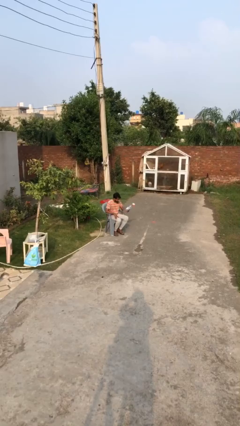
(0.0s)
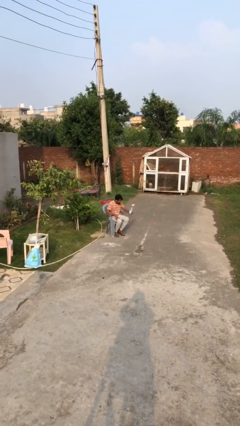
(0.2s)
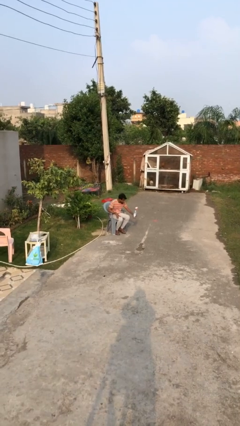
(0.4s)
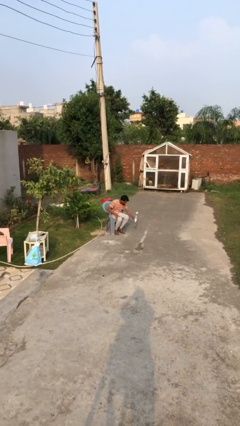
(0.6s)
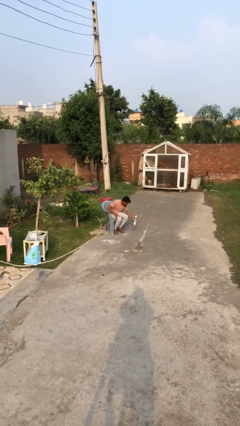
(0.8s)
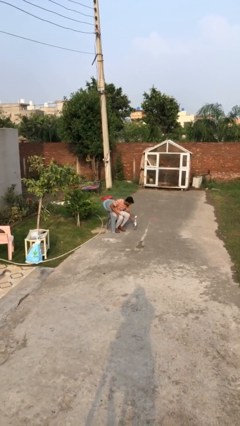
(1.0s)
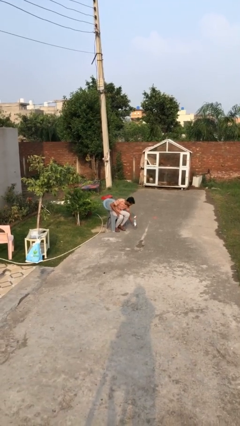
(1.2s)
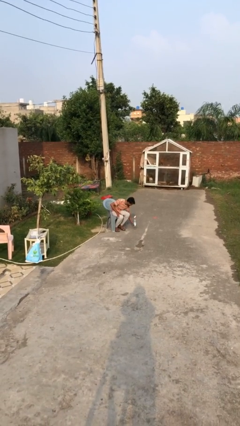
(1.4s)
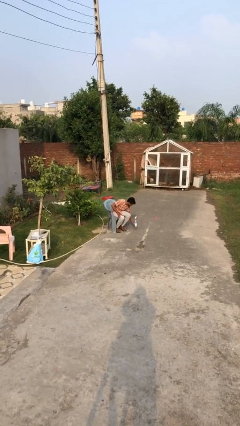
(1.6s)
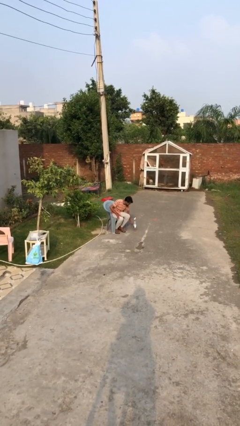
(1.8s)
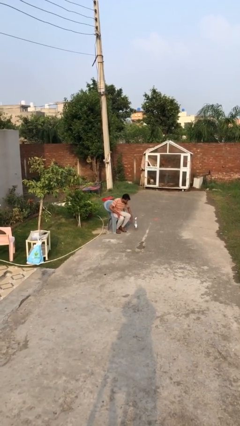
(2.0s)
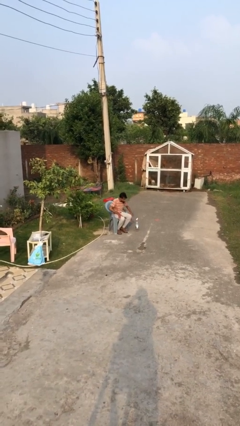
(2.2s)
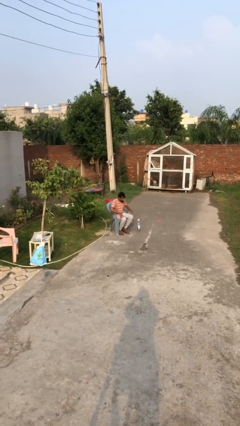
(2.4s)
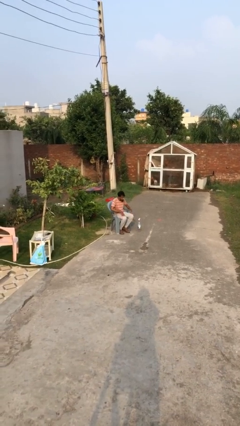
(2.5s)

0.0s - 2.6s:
person puts down object on floor

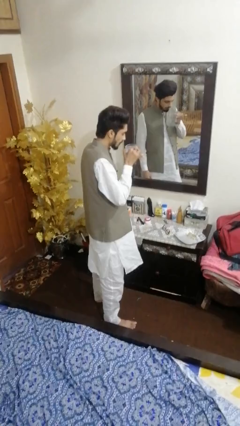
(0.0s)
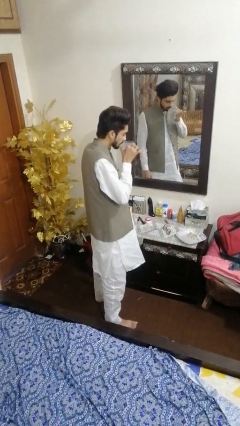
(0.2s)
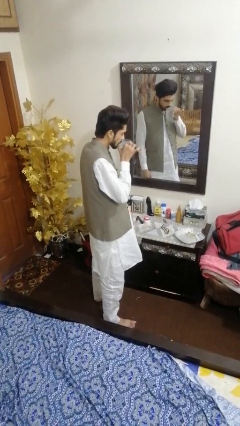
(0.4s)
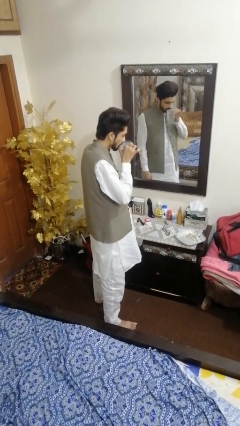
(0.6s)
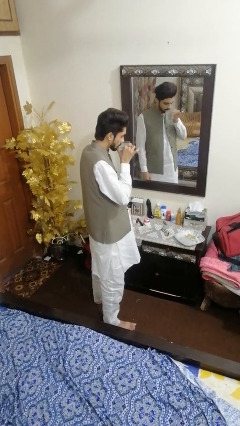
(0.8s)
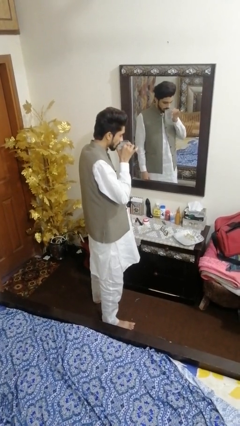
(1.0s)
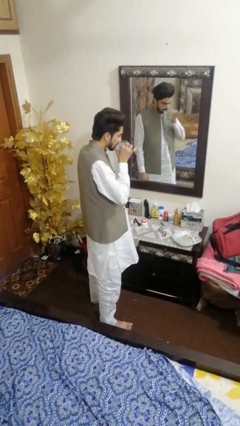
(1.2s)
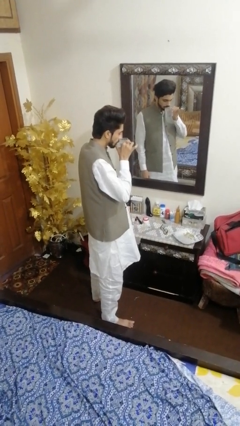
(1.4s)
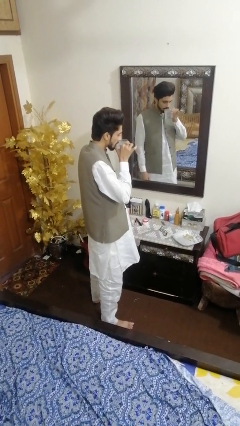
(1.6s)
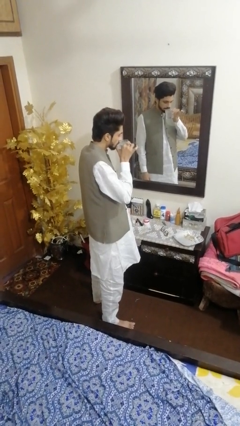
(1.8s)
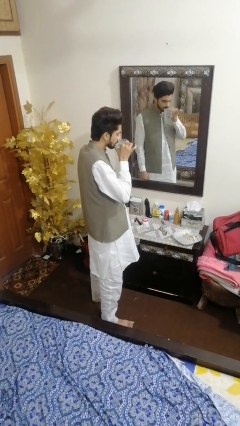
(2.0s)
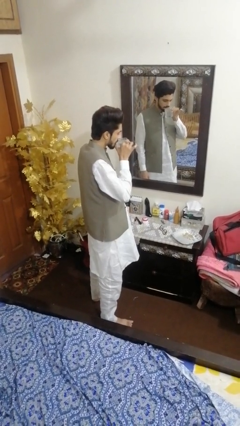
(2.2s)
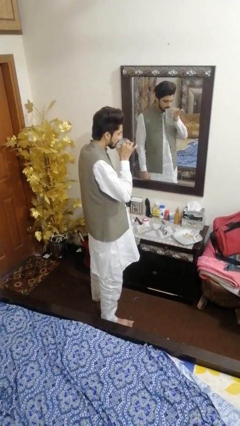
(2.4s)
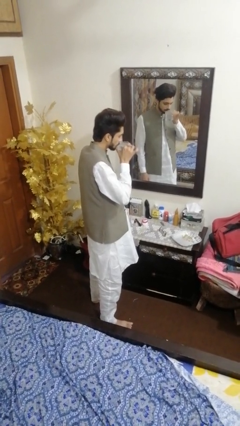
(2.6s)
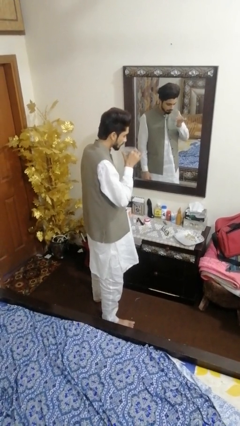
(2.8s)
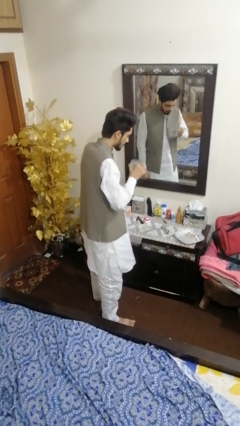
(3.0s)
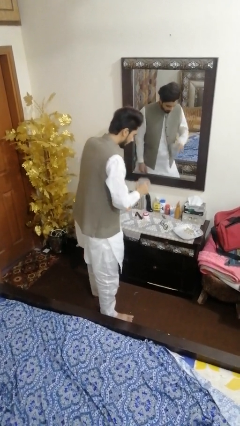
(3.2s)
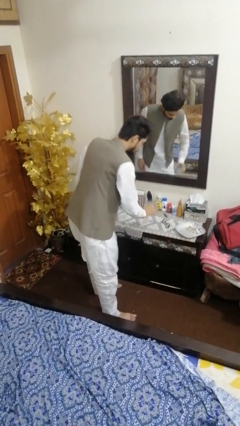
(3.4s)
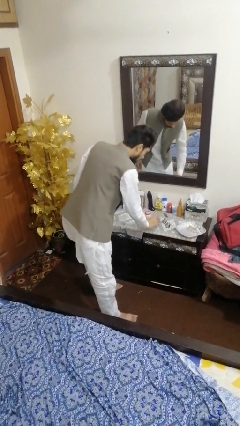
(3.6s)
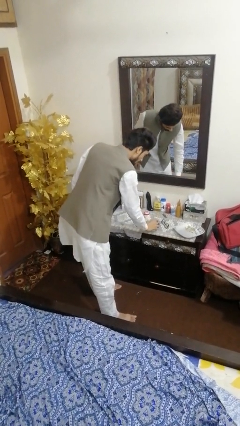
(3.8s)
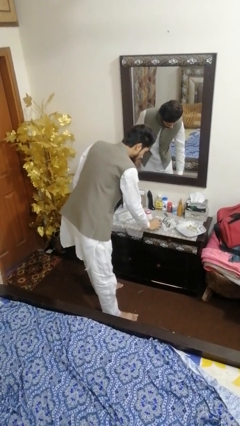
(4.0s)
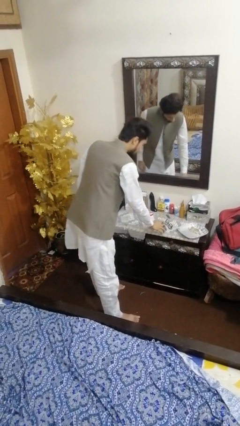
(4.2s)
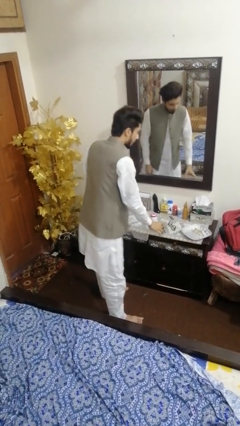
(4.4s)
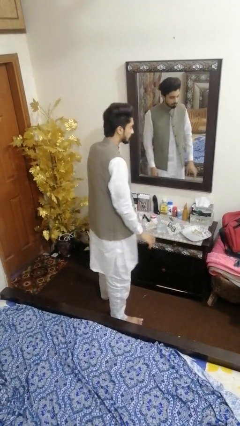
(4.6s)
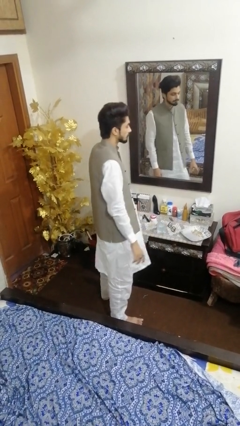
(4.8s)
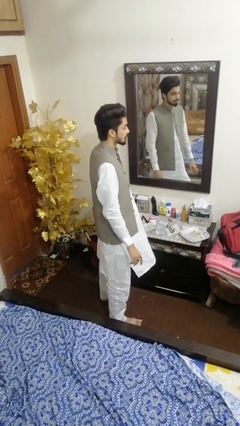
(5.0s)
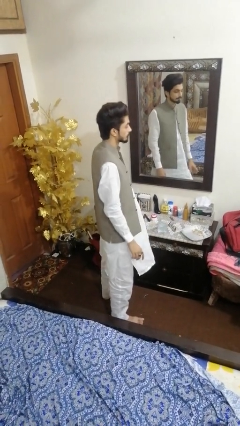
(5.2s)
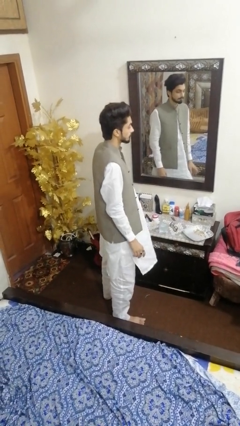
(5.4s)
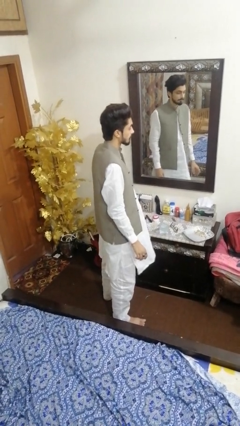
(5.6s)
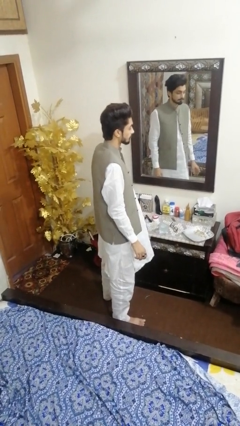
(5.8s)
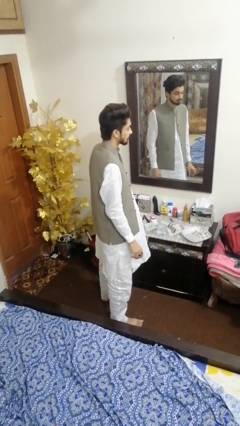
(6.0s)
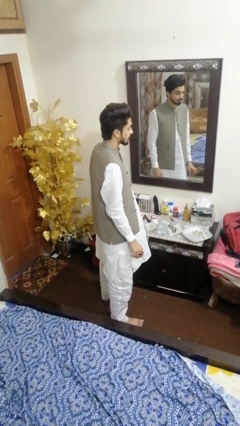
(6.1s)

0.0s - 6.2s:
person drinks from cup

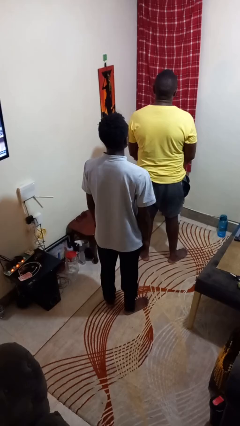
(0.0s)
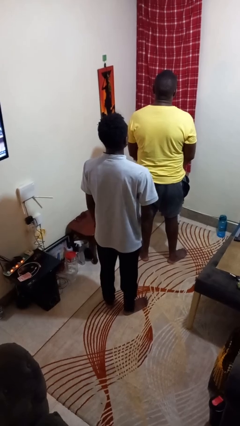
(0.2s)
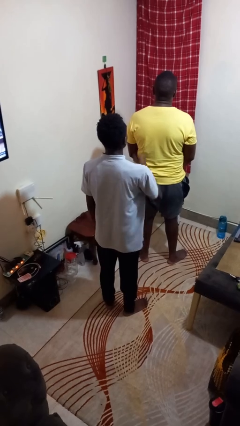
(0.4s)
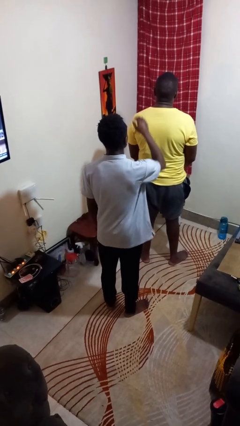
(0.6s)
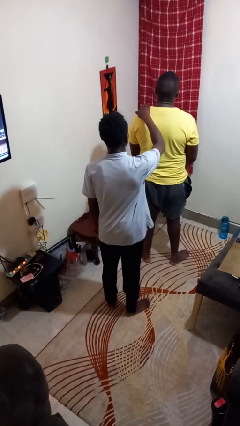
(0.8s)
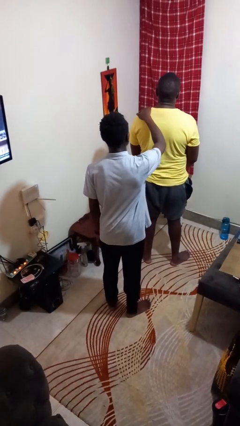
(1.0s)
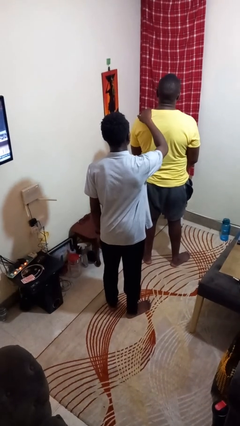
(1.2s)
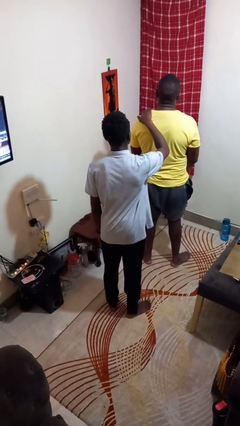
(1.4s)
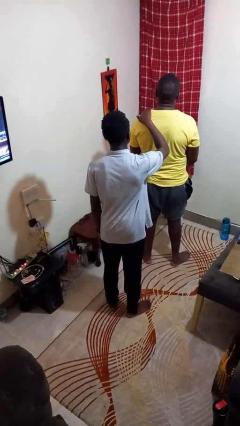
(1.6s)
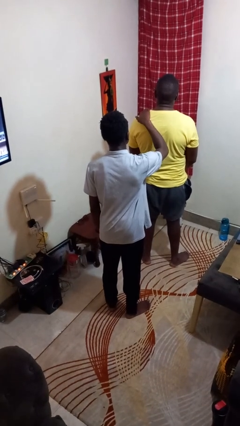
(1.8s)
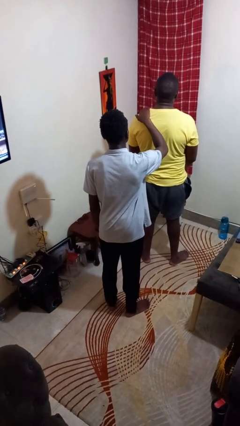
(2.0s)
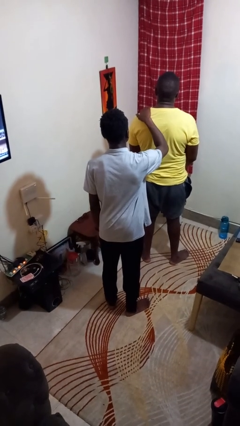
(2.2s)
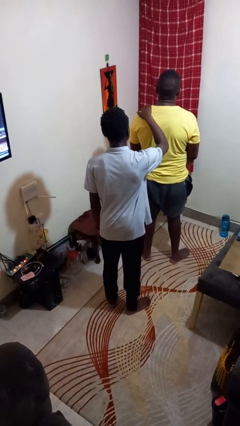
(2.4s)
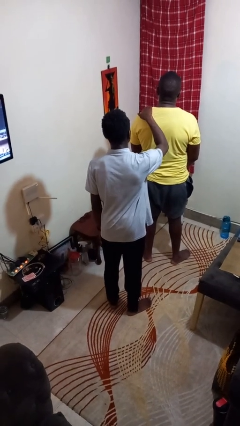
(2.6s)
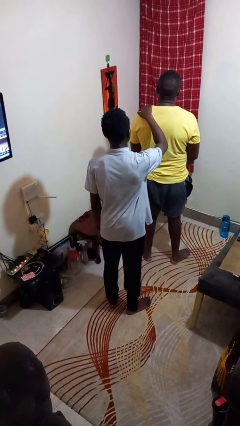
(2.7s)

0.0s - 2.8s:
person touches back of person

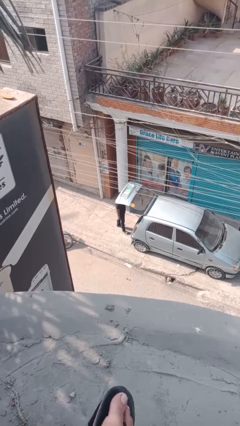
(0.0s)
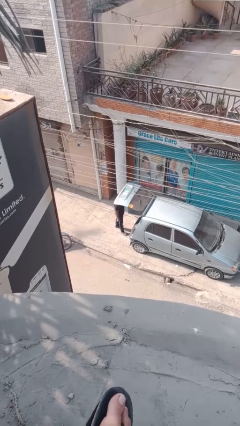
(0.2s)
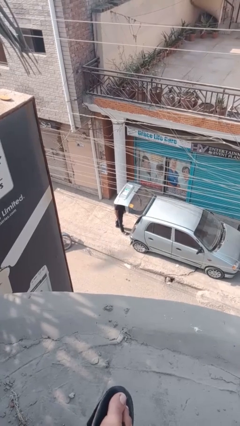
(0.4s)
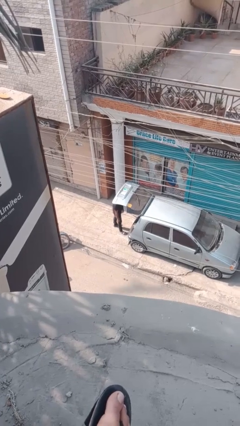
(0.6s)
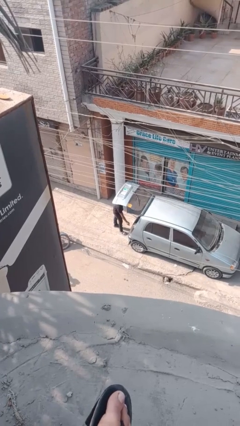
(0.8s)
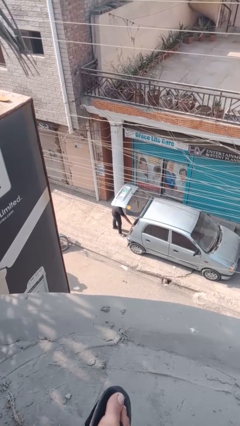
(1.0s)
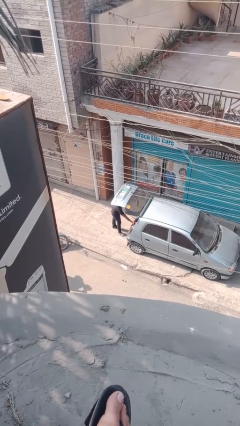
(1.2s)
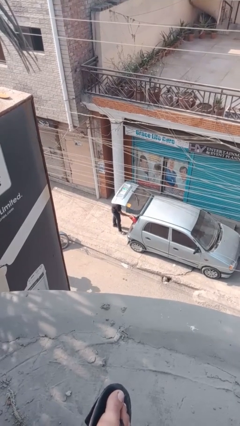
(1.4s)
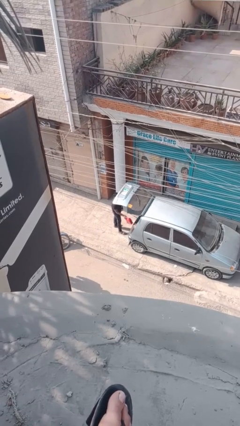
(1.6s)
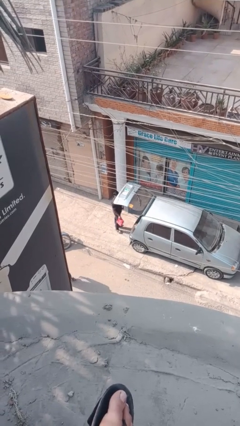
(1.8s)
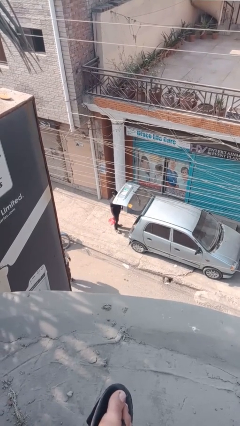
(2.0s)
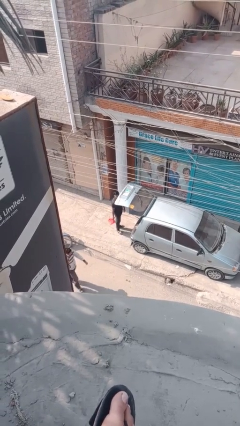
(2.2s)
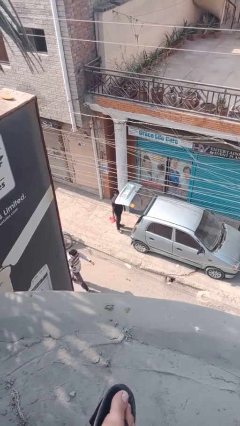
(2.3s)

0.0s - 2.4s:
person unloads car

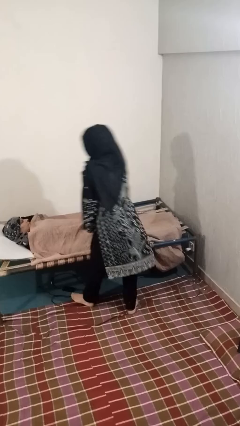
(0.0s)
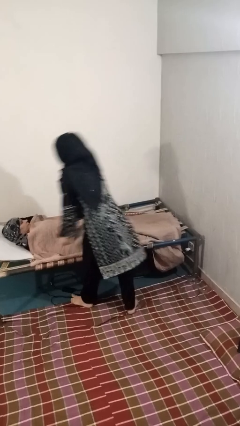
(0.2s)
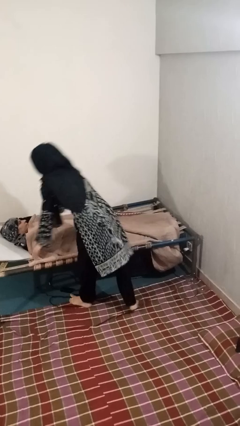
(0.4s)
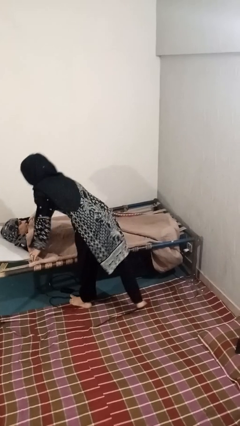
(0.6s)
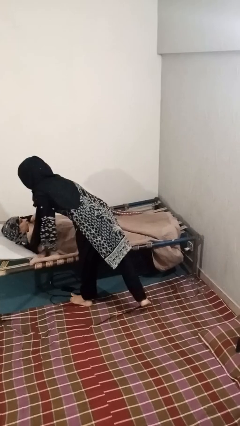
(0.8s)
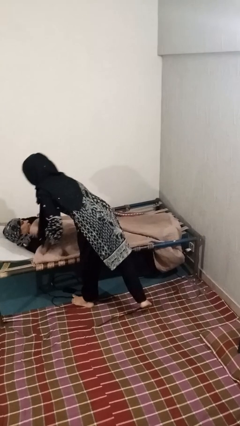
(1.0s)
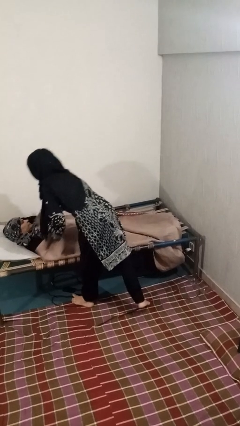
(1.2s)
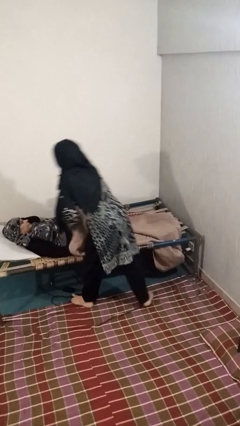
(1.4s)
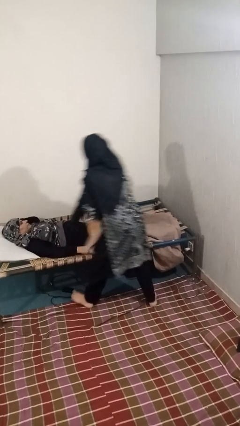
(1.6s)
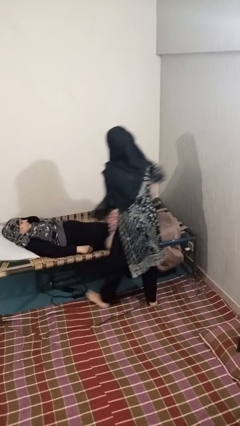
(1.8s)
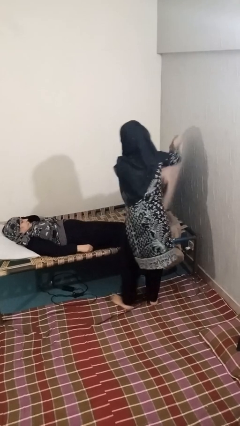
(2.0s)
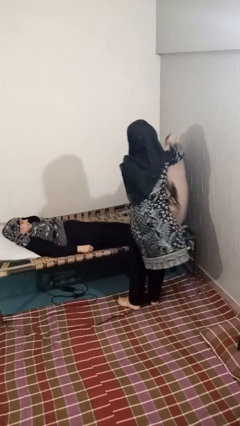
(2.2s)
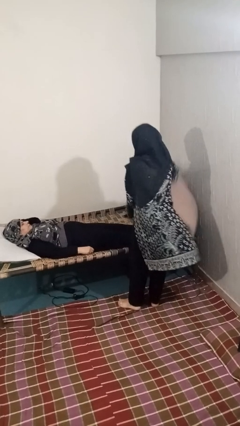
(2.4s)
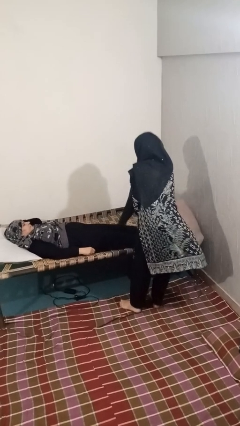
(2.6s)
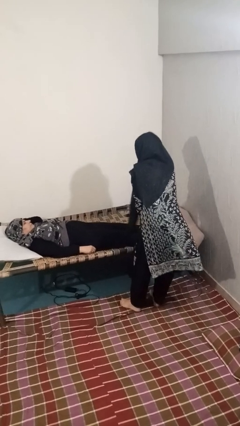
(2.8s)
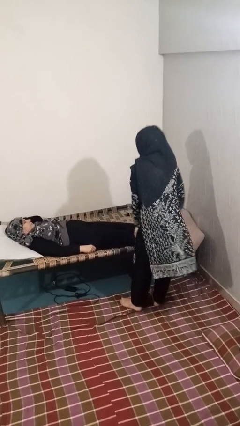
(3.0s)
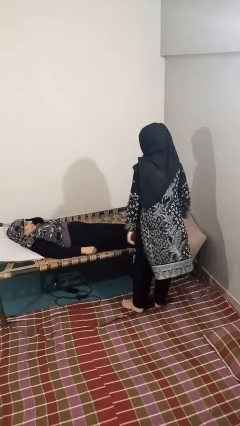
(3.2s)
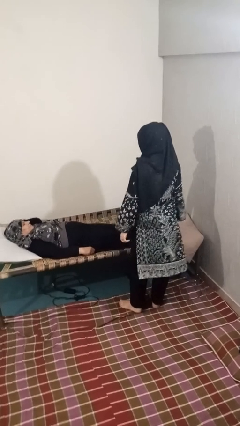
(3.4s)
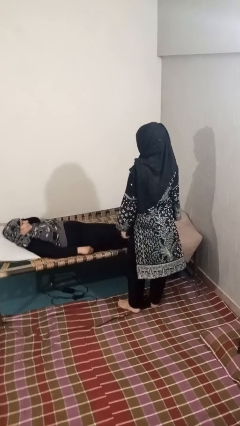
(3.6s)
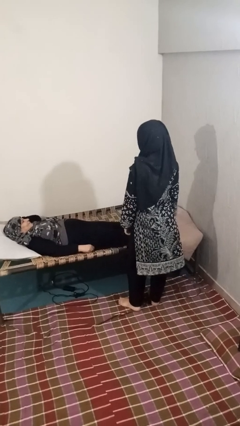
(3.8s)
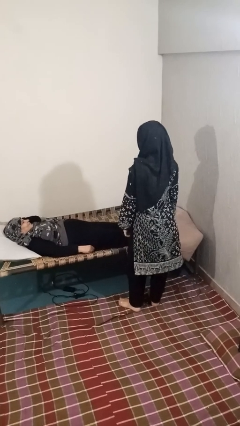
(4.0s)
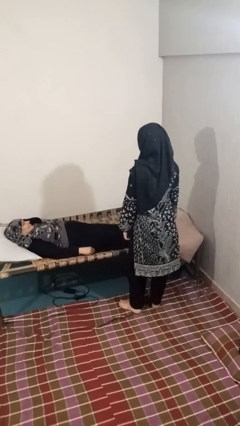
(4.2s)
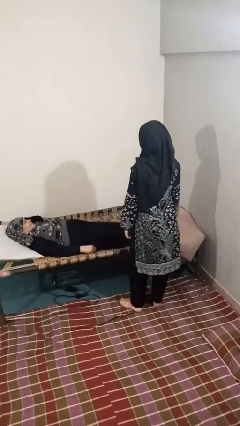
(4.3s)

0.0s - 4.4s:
person uncovers friend with blanket
